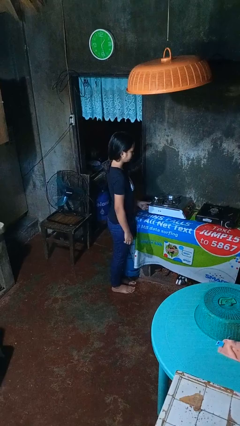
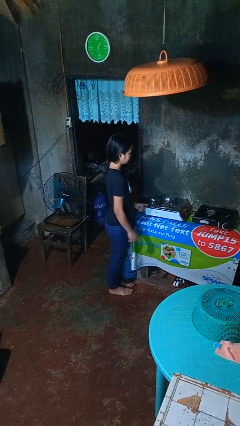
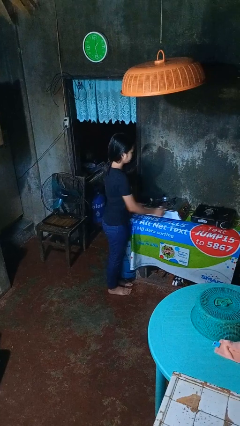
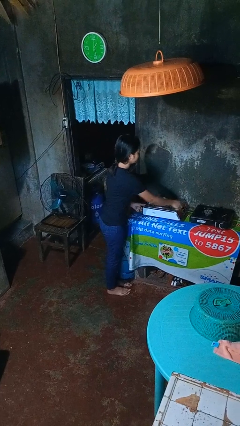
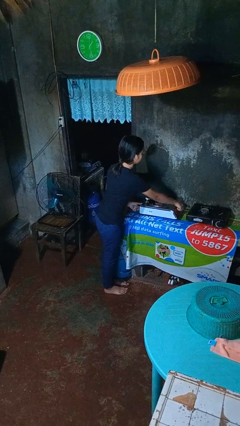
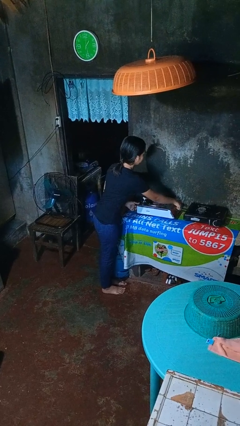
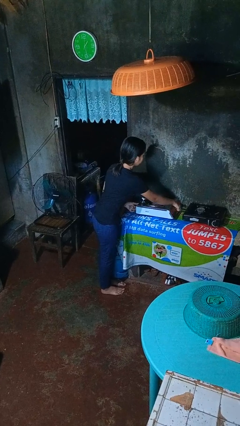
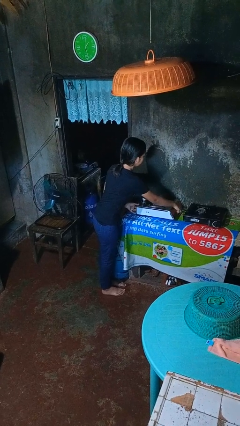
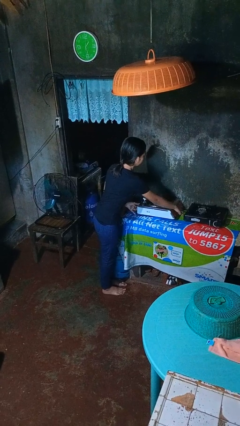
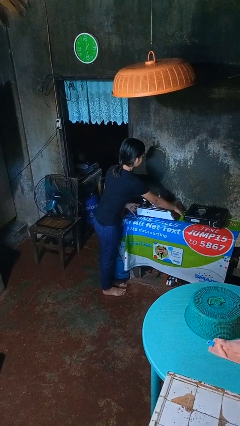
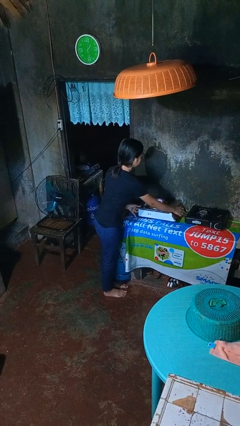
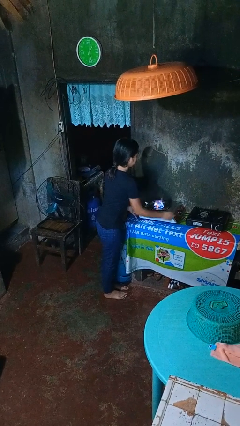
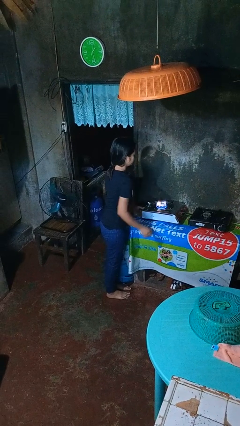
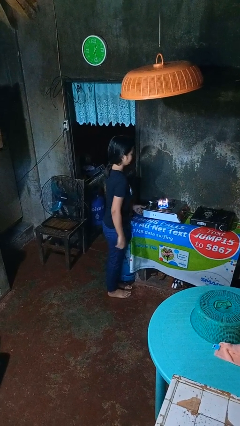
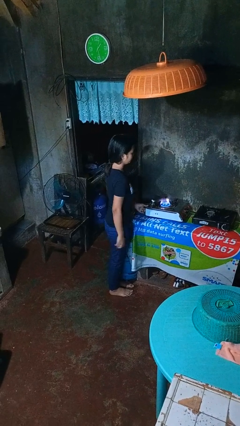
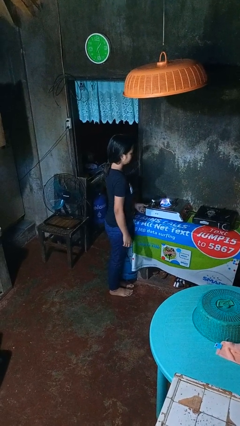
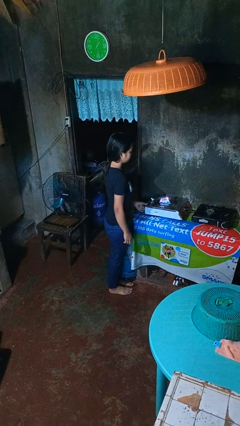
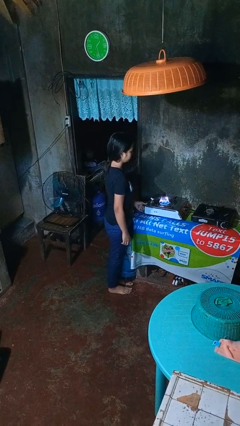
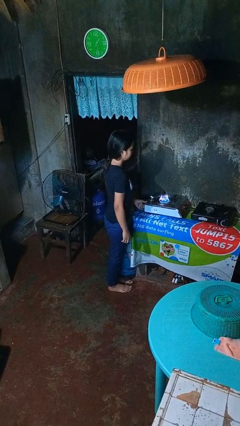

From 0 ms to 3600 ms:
person turns on stovetop

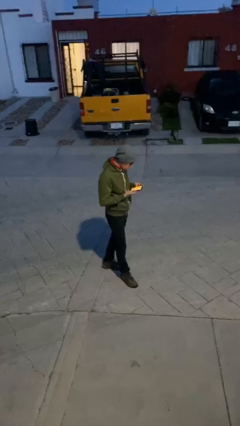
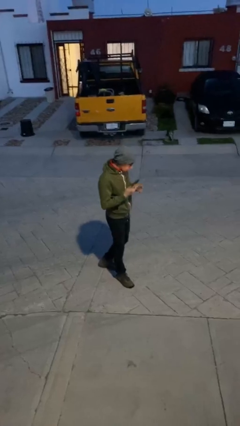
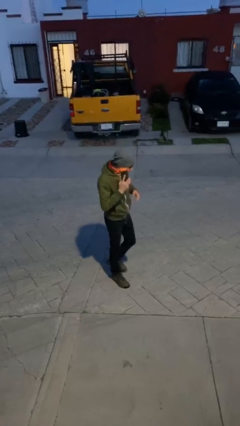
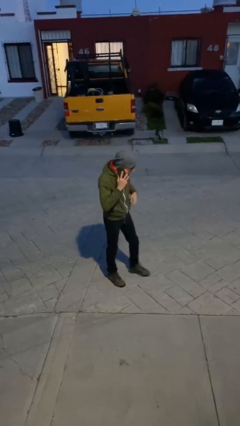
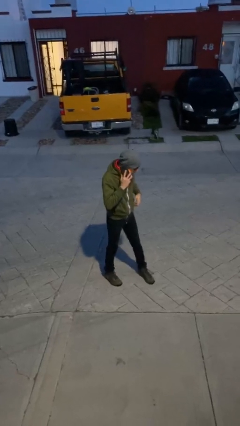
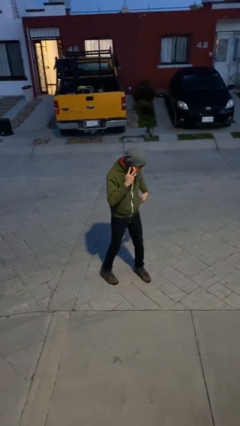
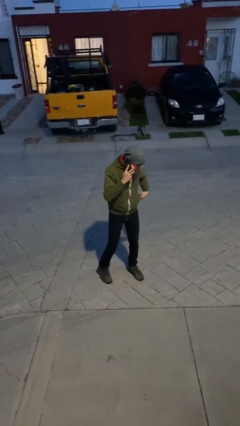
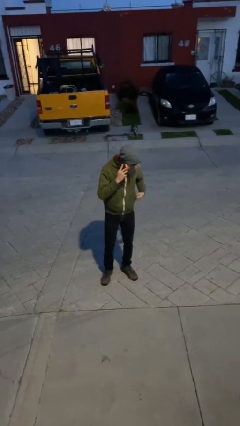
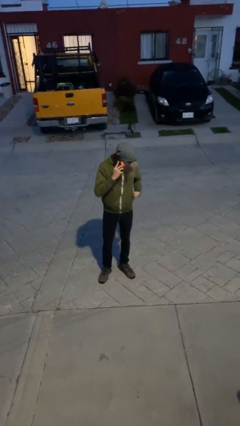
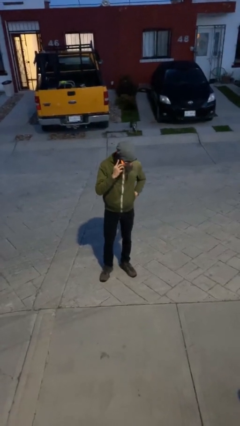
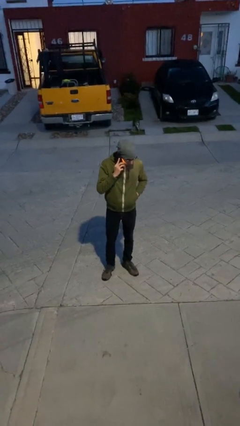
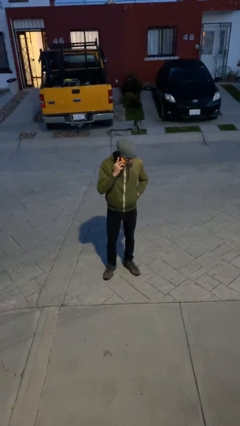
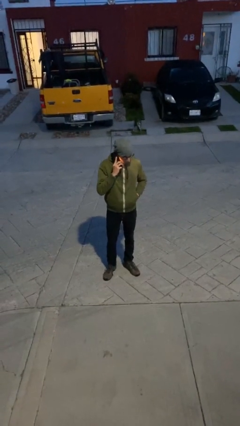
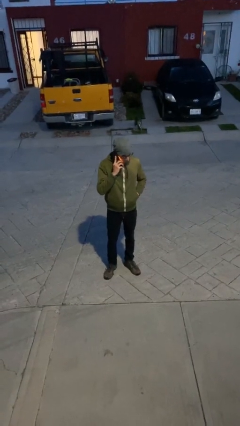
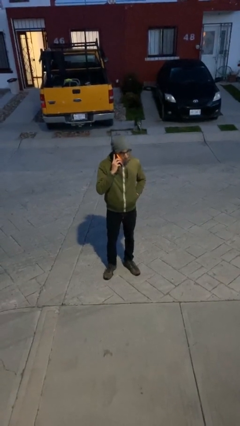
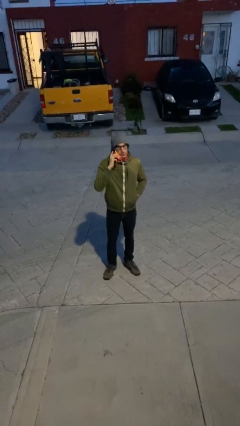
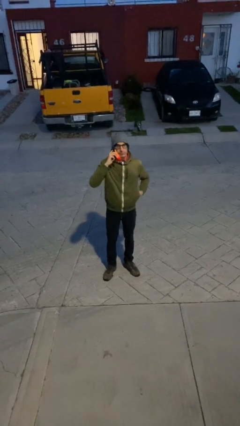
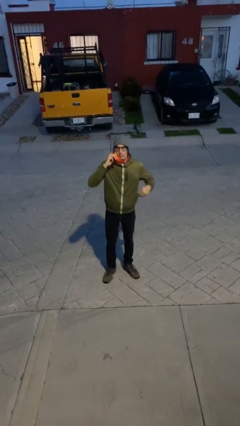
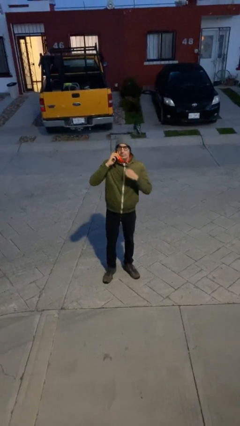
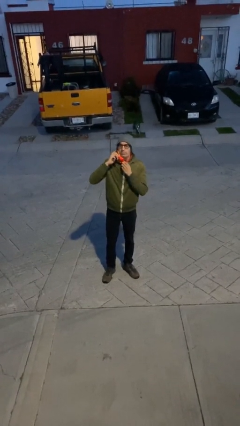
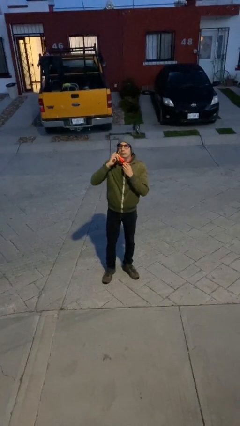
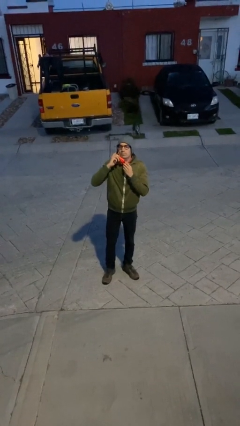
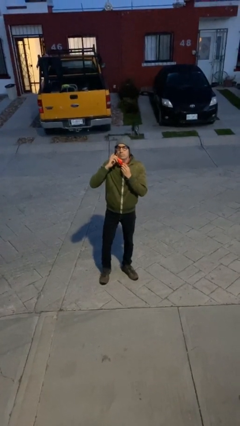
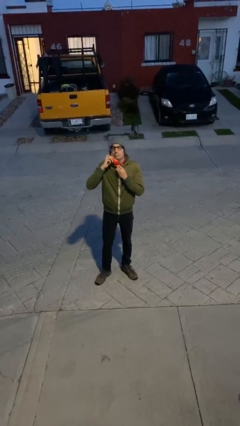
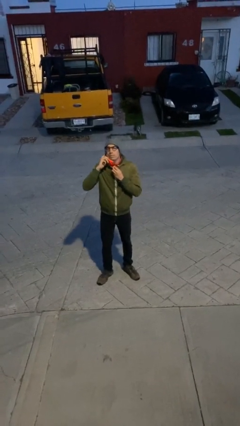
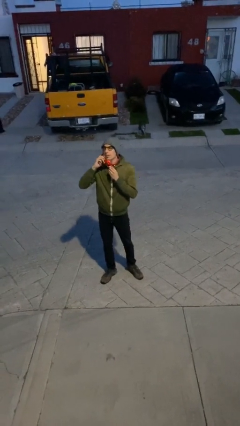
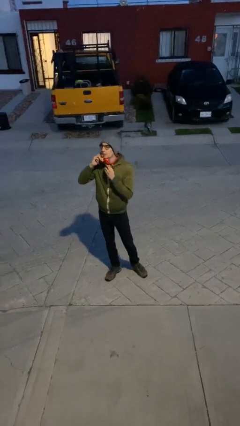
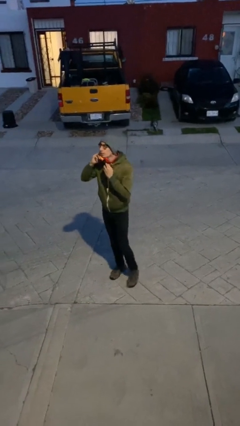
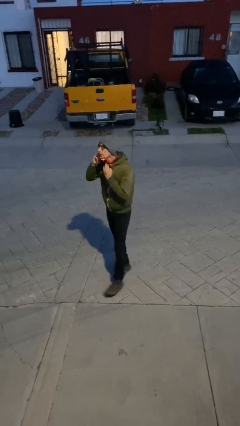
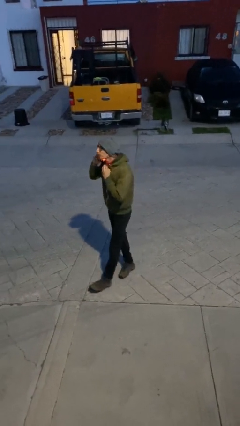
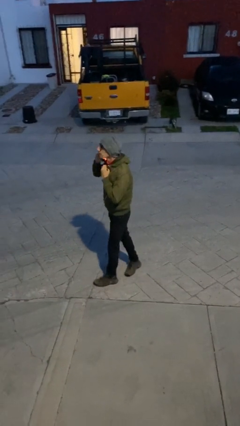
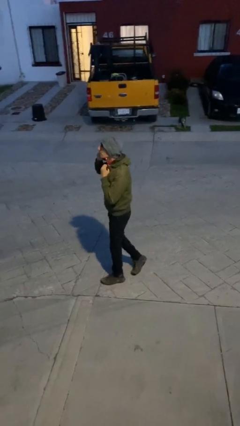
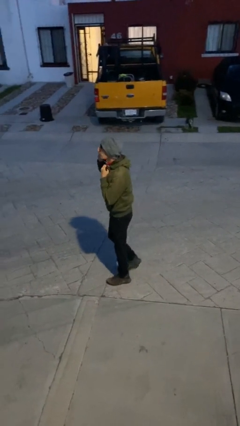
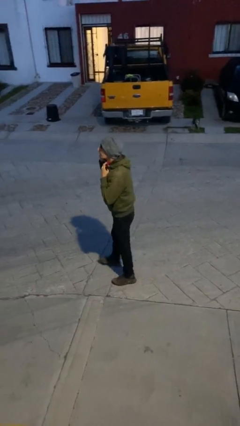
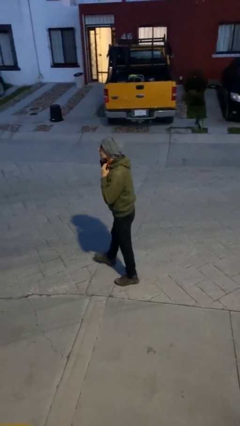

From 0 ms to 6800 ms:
person talks on phone

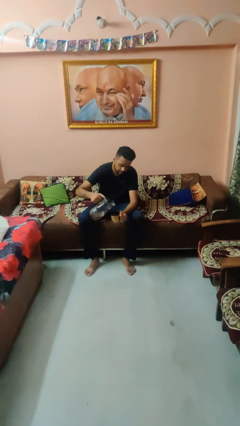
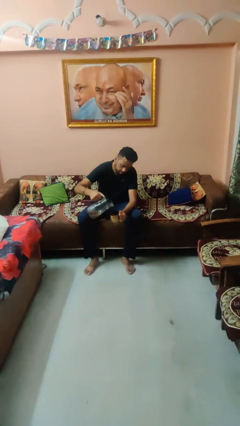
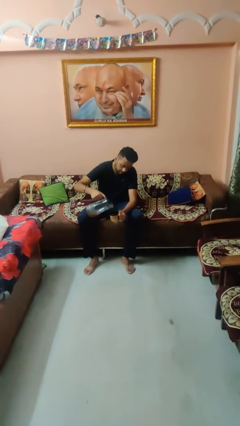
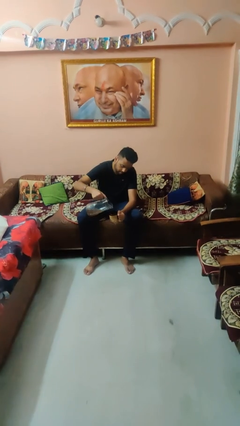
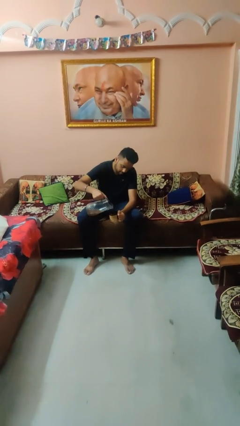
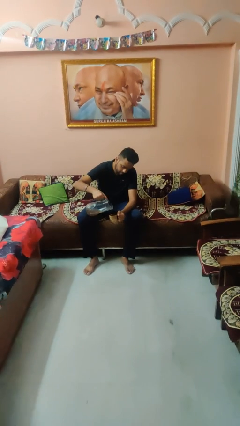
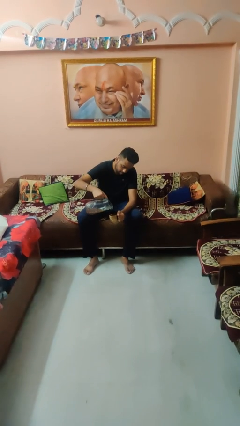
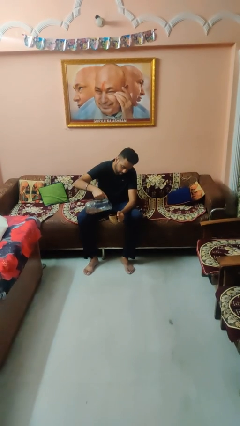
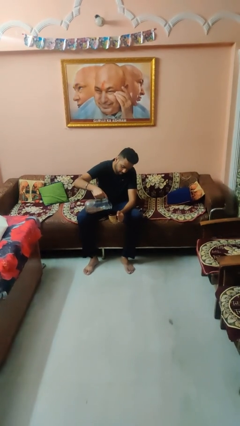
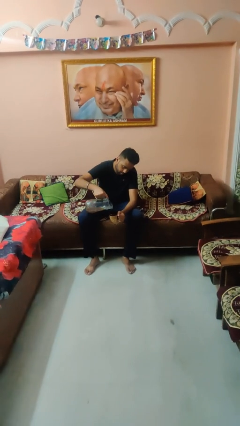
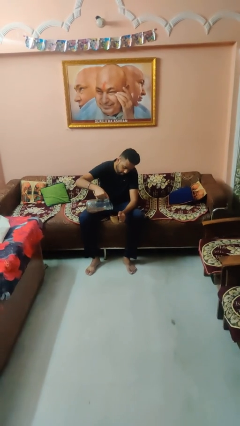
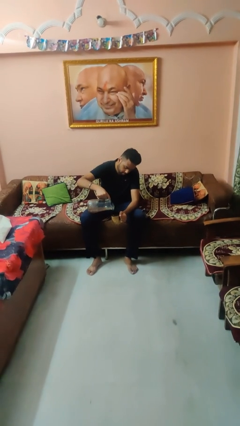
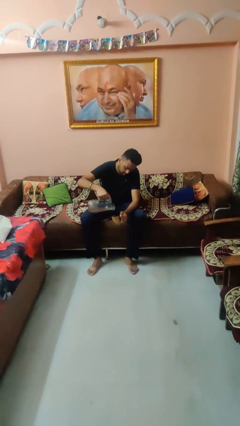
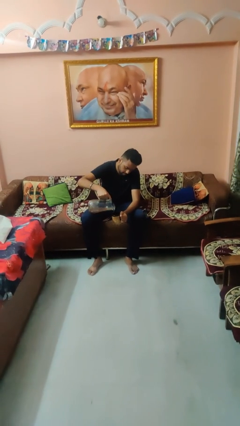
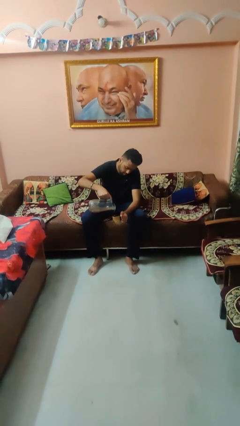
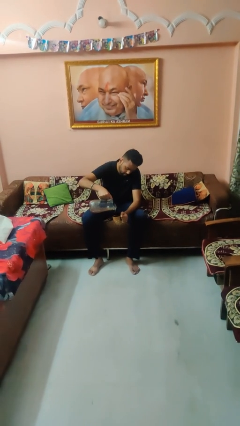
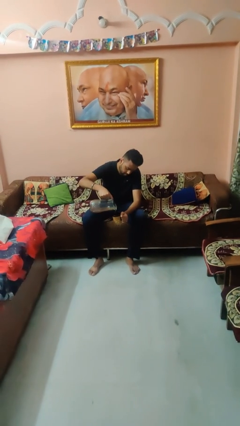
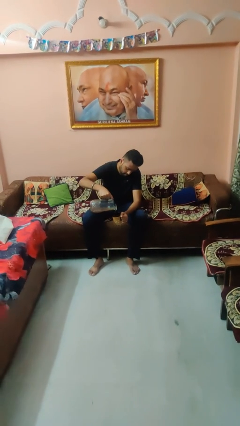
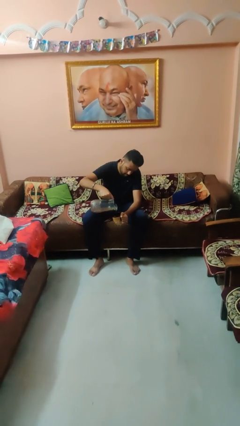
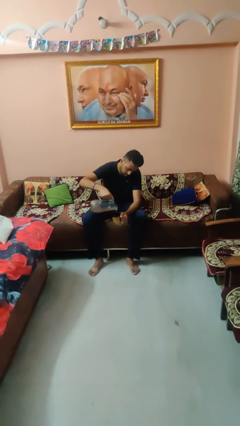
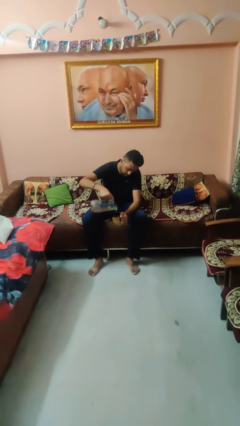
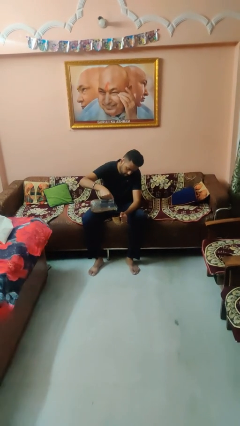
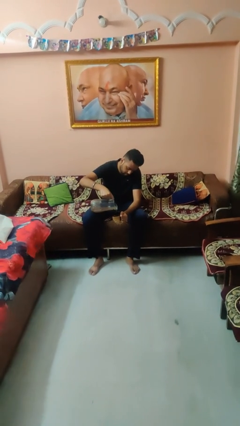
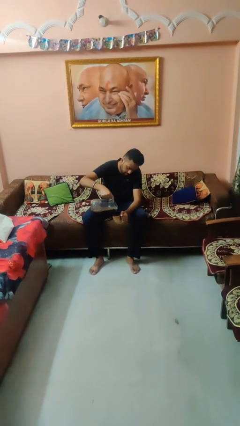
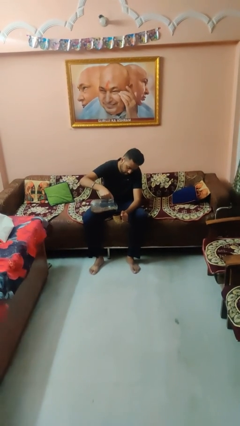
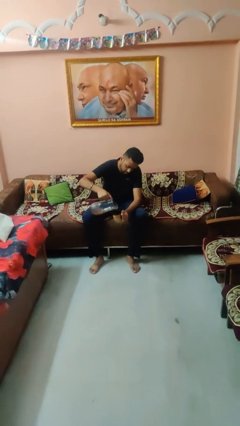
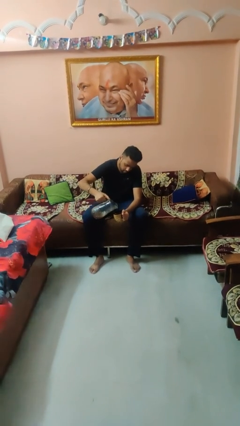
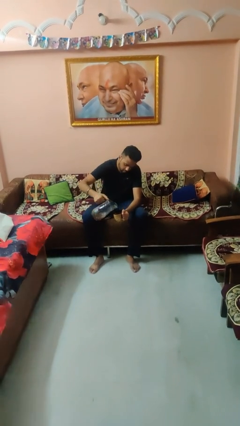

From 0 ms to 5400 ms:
person pours coffee into mug

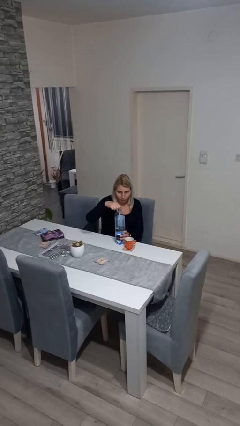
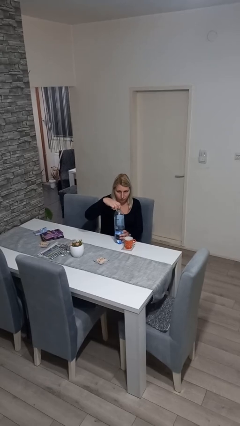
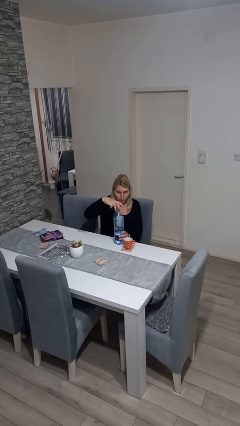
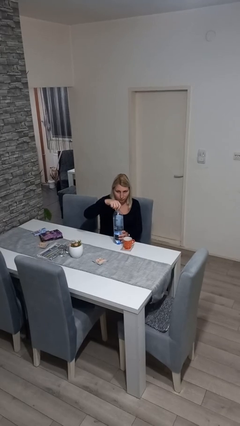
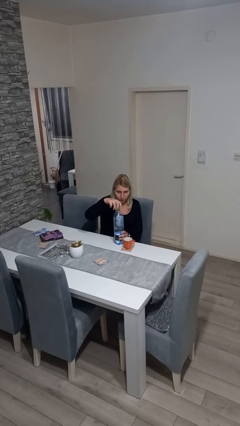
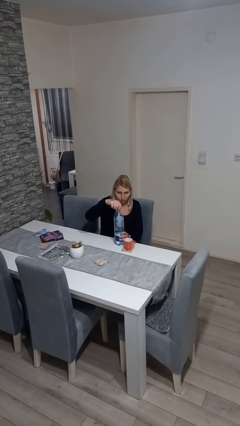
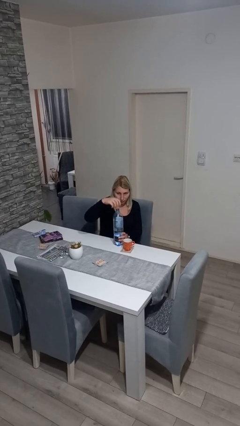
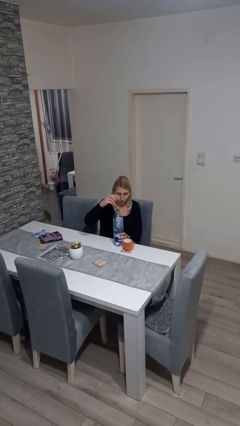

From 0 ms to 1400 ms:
person unscrews lid from bottle

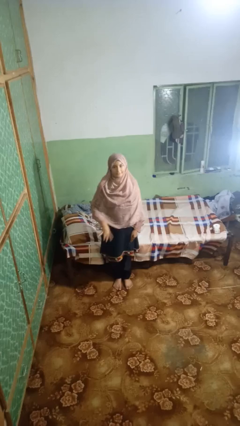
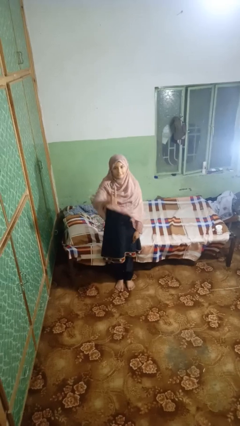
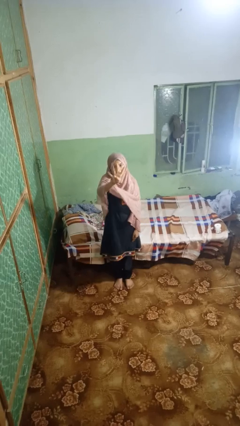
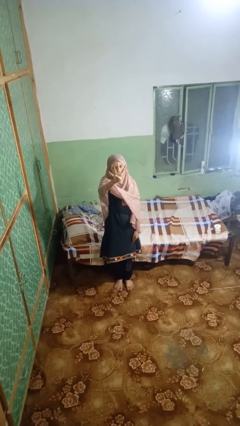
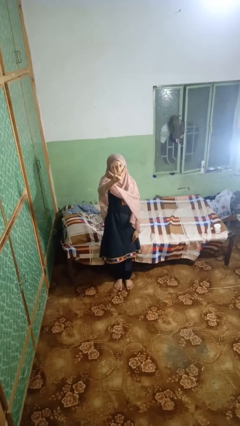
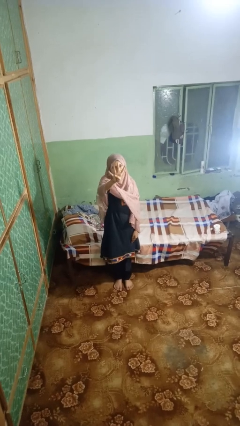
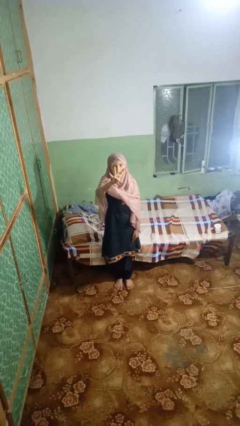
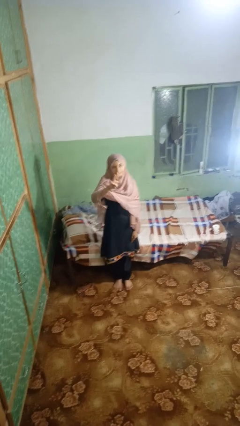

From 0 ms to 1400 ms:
person gestures number four
